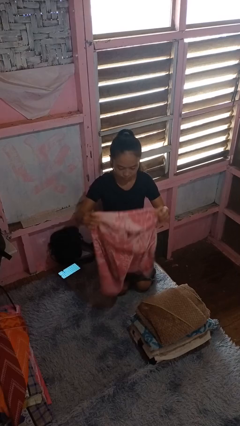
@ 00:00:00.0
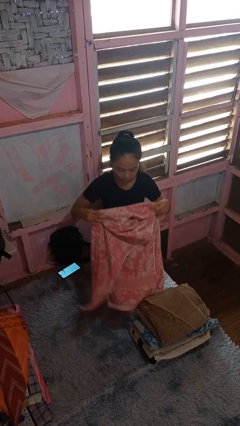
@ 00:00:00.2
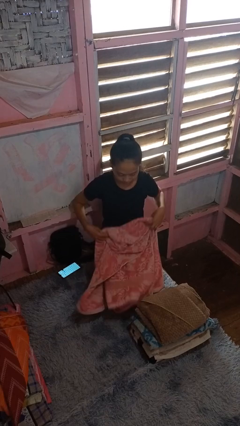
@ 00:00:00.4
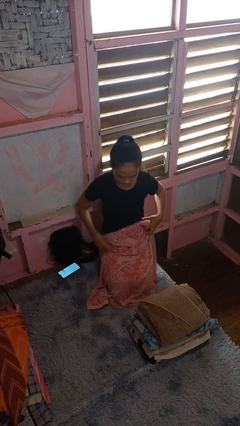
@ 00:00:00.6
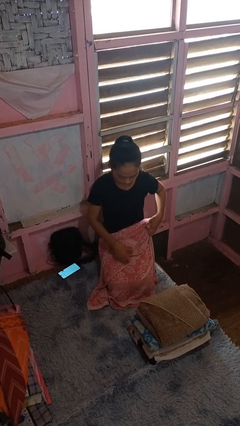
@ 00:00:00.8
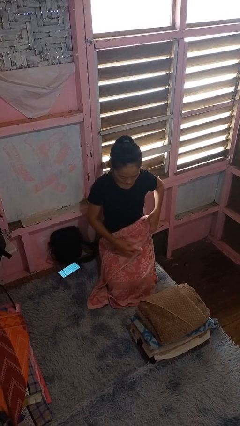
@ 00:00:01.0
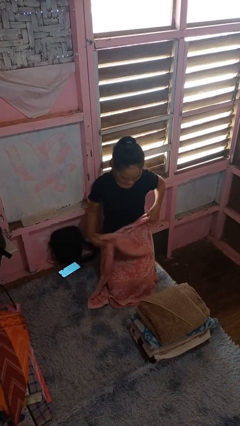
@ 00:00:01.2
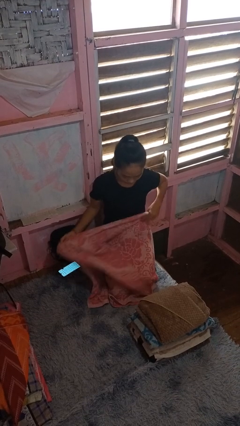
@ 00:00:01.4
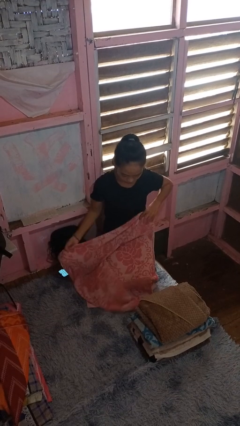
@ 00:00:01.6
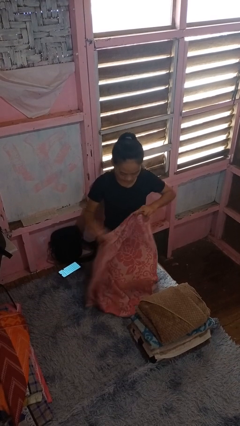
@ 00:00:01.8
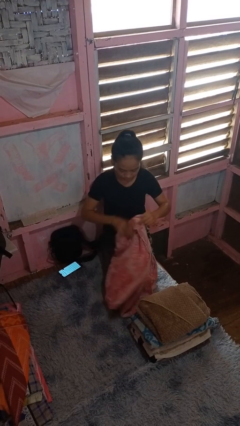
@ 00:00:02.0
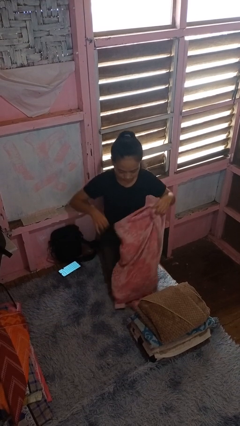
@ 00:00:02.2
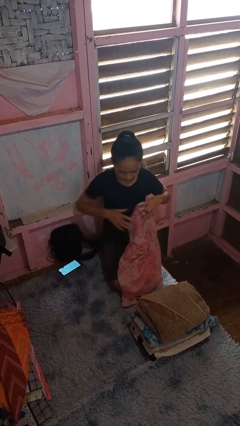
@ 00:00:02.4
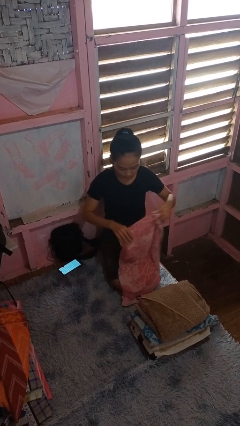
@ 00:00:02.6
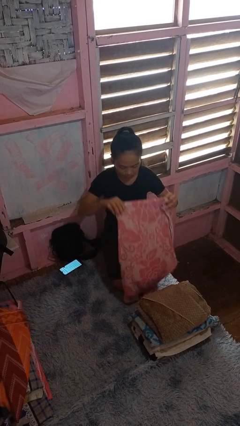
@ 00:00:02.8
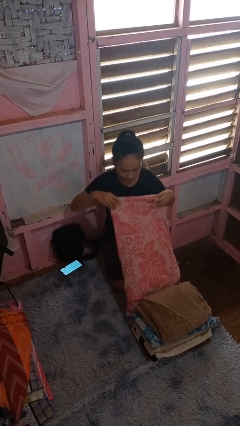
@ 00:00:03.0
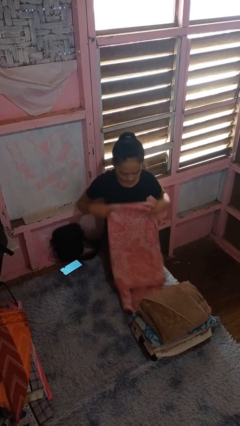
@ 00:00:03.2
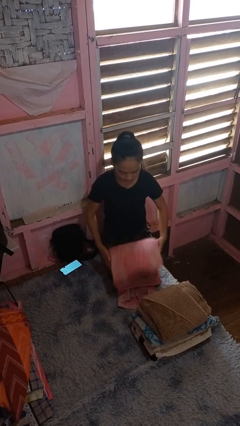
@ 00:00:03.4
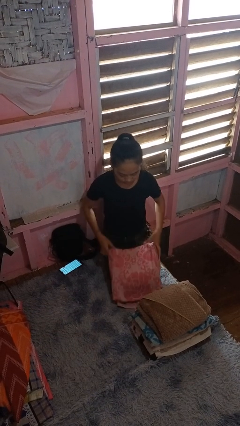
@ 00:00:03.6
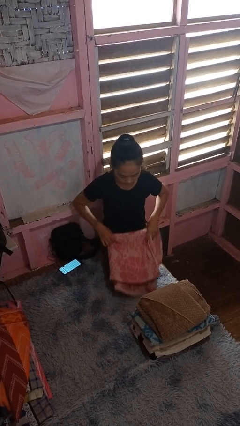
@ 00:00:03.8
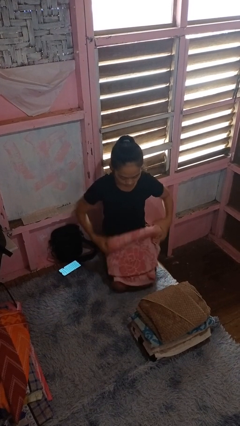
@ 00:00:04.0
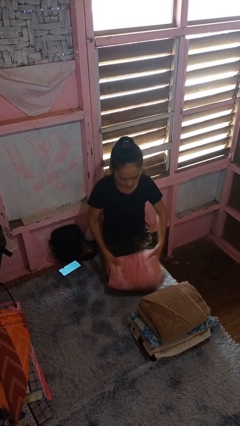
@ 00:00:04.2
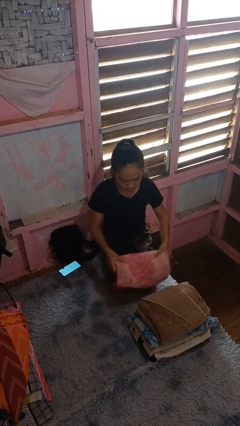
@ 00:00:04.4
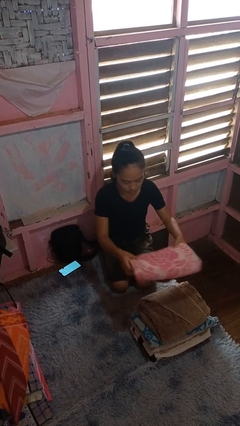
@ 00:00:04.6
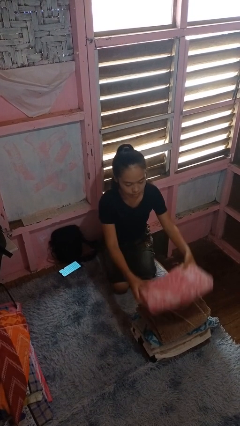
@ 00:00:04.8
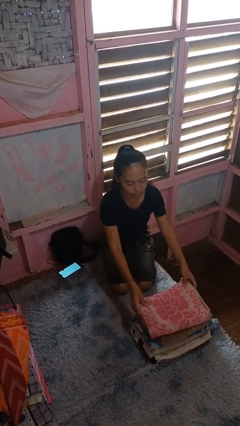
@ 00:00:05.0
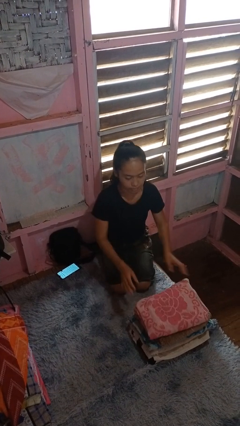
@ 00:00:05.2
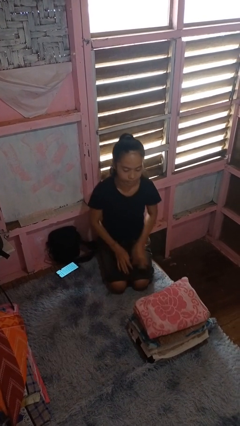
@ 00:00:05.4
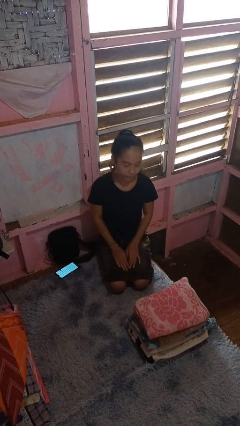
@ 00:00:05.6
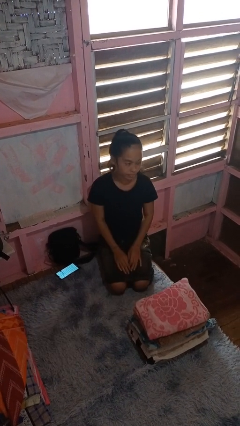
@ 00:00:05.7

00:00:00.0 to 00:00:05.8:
person folds towel

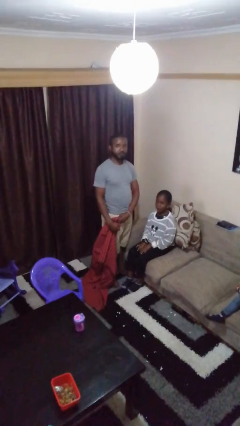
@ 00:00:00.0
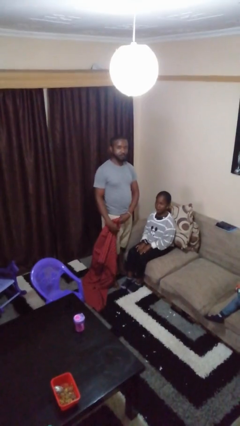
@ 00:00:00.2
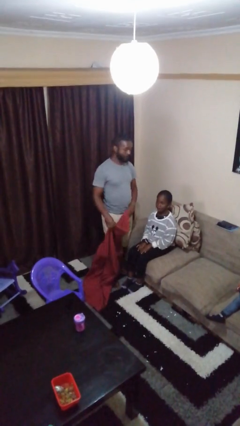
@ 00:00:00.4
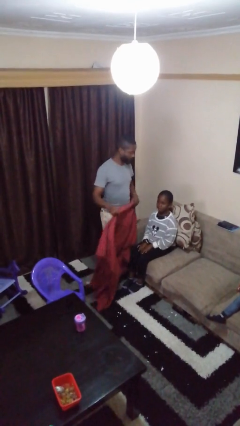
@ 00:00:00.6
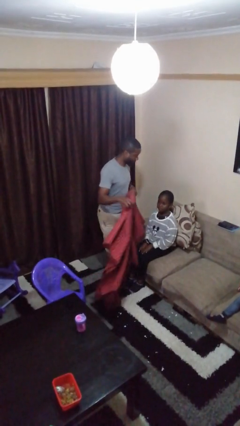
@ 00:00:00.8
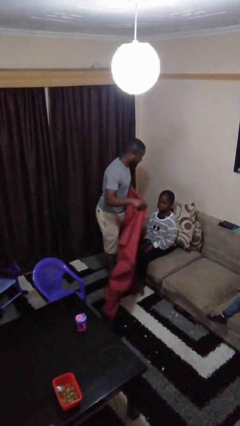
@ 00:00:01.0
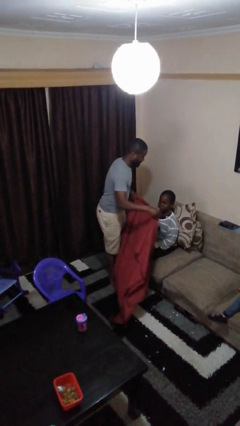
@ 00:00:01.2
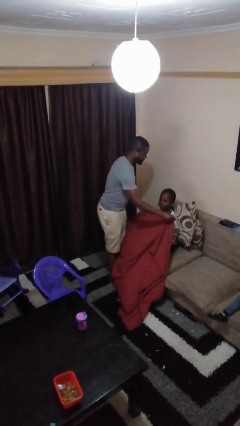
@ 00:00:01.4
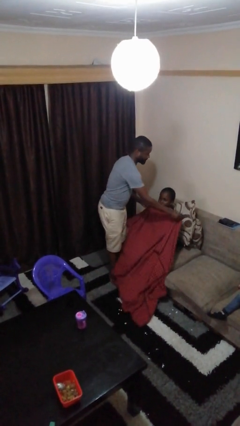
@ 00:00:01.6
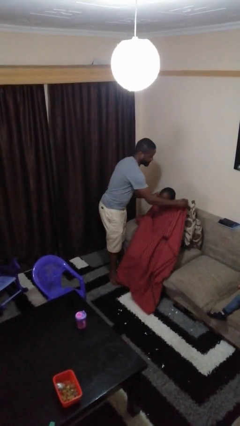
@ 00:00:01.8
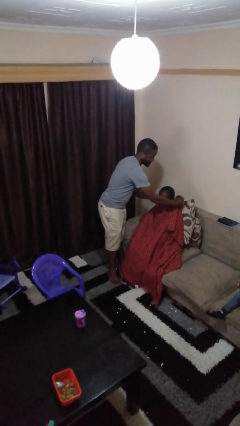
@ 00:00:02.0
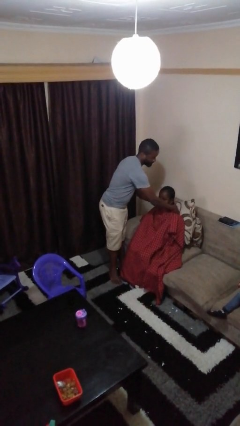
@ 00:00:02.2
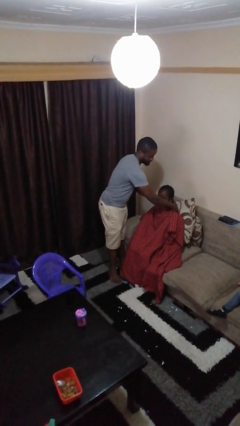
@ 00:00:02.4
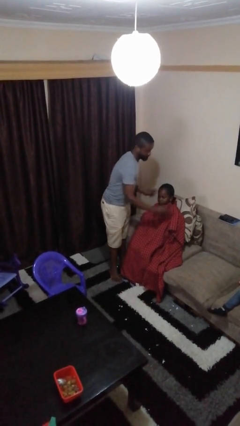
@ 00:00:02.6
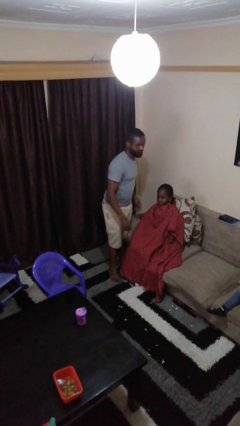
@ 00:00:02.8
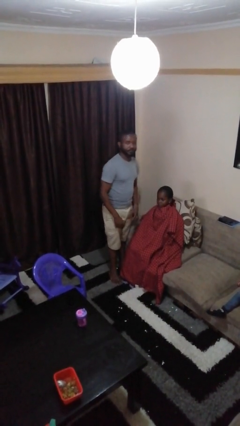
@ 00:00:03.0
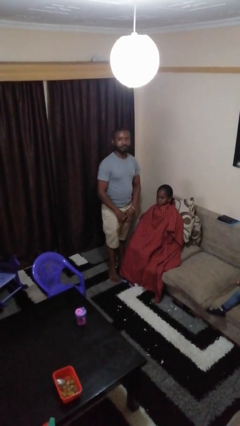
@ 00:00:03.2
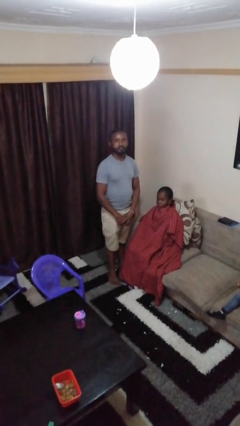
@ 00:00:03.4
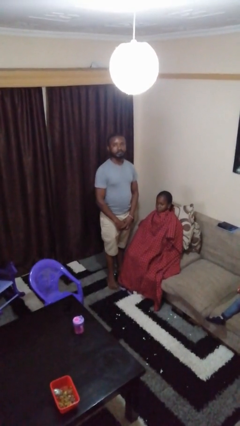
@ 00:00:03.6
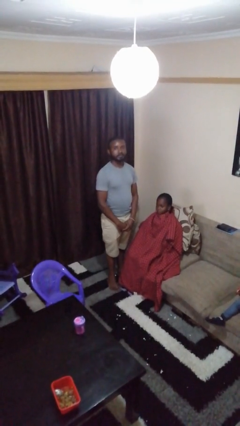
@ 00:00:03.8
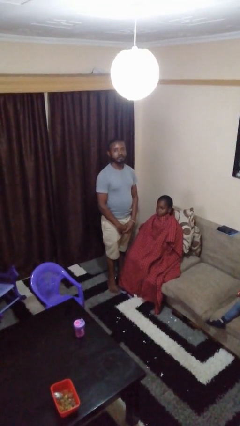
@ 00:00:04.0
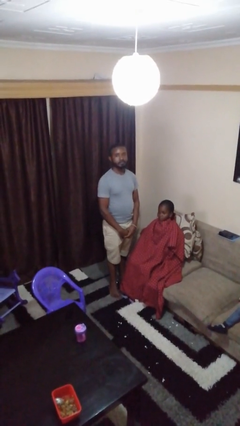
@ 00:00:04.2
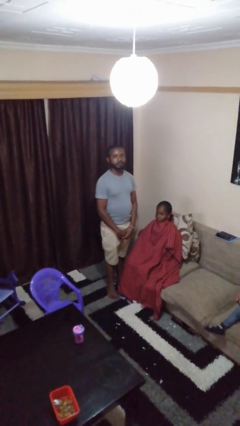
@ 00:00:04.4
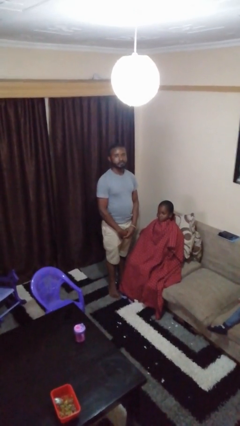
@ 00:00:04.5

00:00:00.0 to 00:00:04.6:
person covers friend with blanket

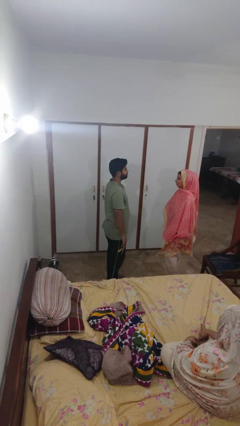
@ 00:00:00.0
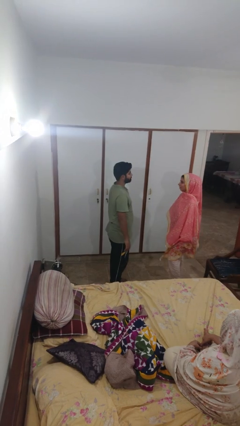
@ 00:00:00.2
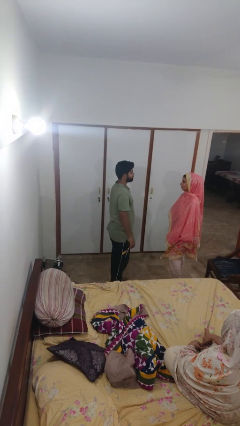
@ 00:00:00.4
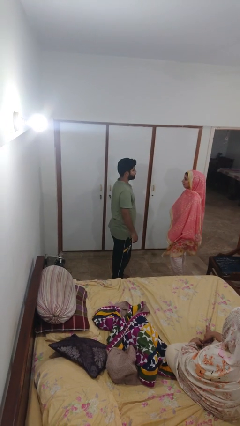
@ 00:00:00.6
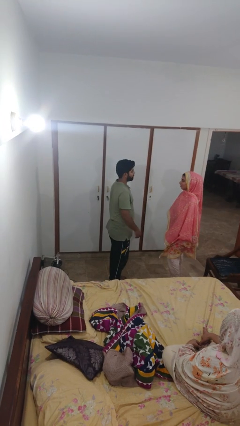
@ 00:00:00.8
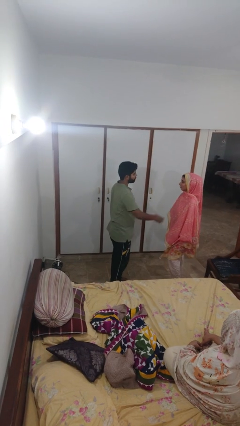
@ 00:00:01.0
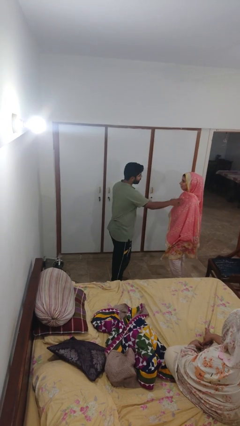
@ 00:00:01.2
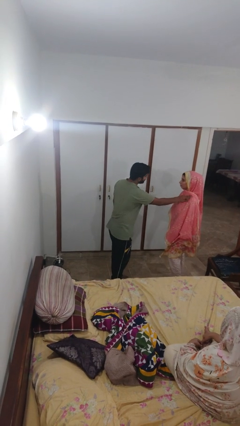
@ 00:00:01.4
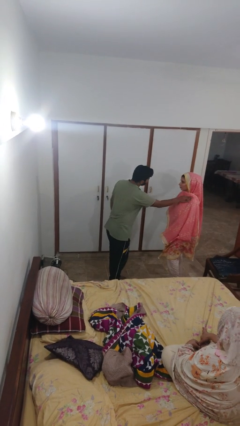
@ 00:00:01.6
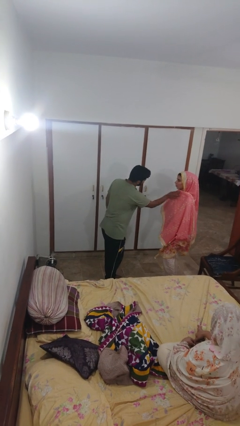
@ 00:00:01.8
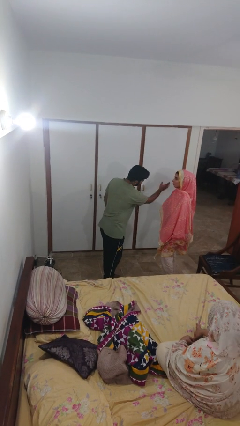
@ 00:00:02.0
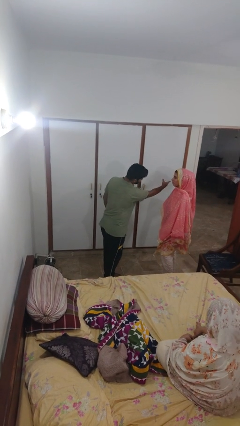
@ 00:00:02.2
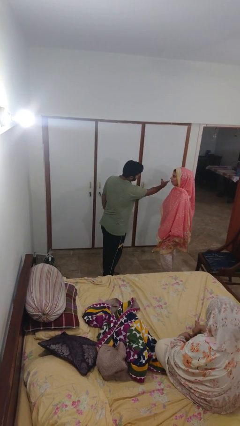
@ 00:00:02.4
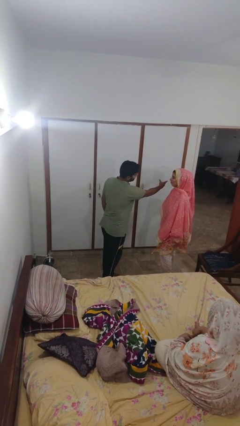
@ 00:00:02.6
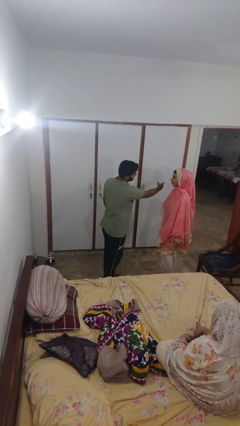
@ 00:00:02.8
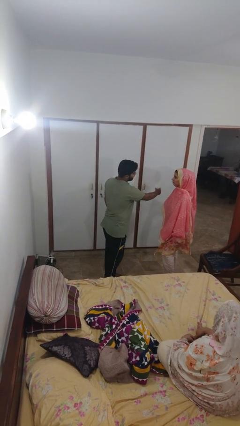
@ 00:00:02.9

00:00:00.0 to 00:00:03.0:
person shoves person

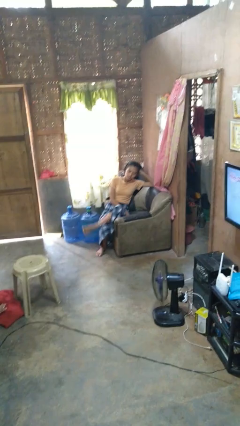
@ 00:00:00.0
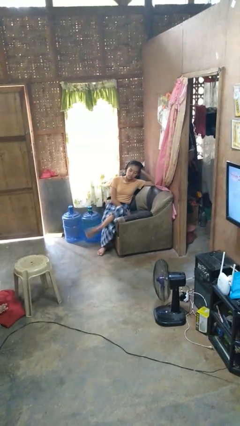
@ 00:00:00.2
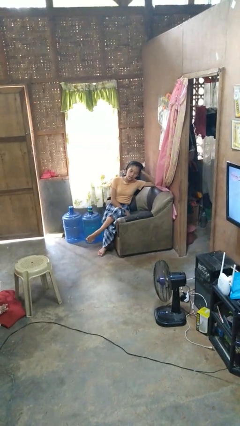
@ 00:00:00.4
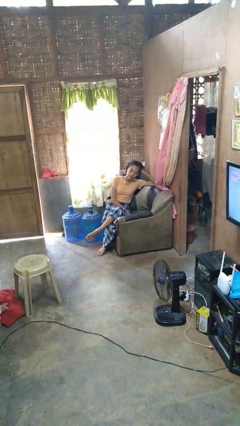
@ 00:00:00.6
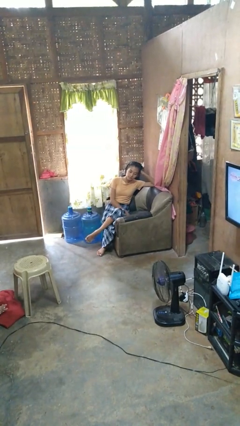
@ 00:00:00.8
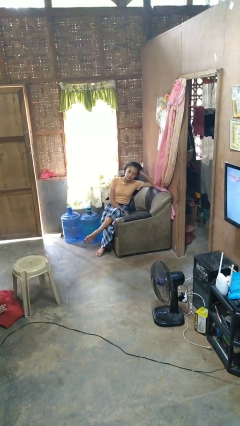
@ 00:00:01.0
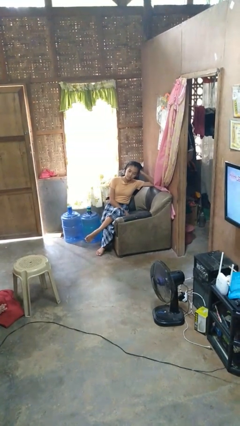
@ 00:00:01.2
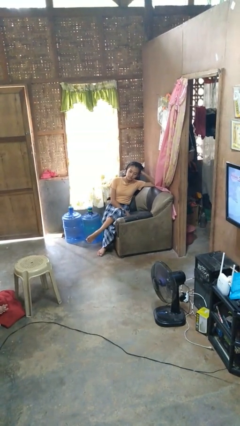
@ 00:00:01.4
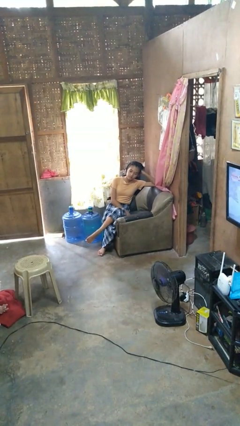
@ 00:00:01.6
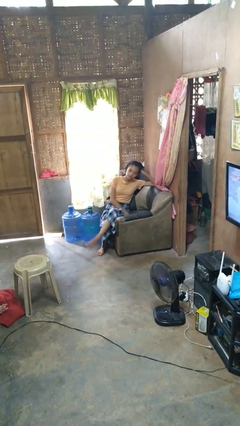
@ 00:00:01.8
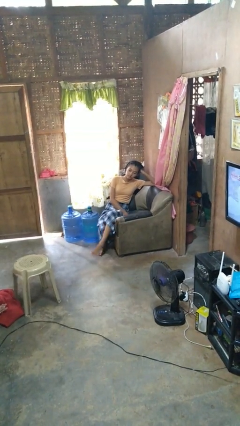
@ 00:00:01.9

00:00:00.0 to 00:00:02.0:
person crosses legs

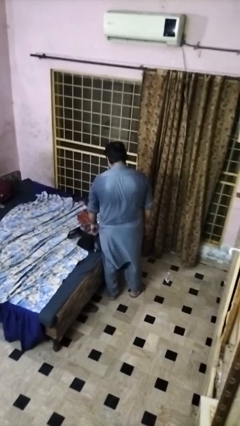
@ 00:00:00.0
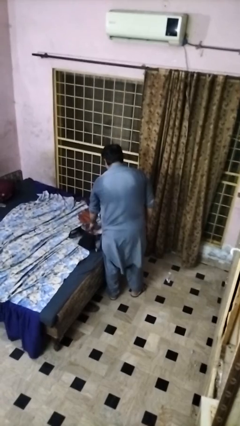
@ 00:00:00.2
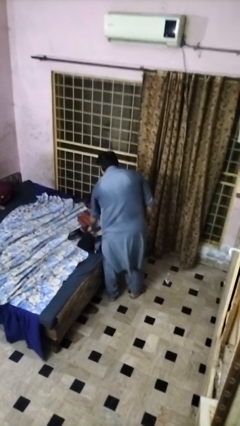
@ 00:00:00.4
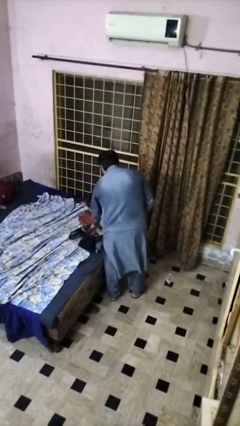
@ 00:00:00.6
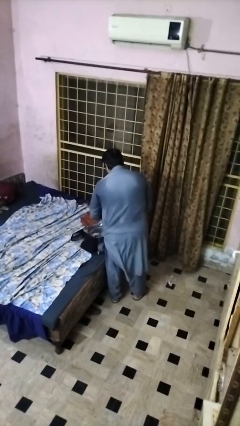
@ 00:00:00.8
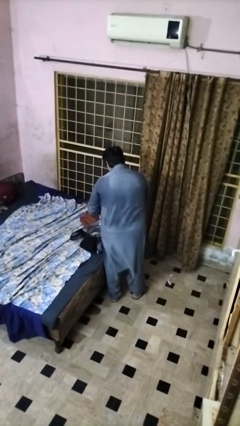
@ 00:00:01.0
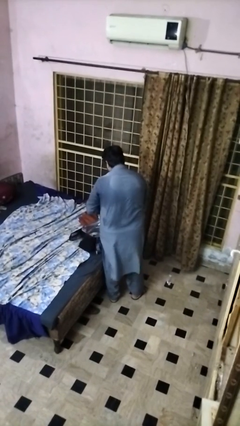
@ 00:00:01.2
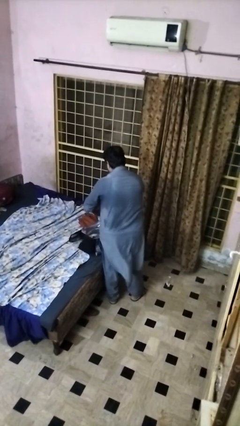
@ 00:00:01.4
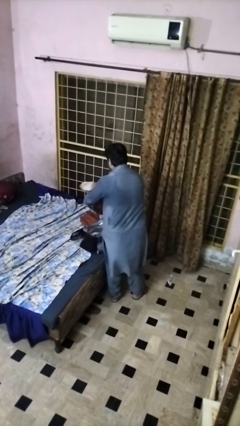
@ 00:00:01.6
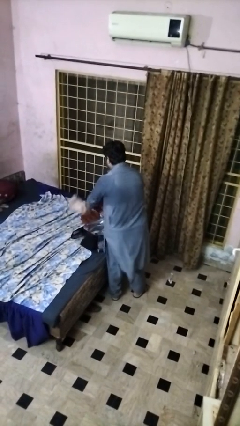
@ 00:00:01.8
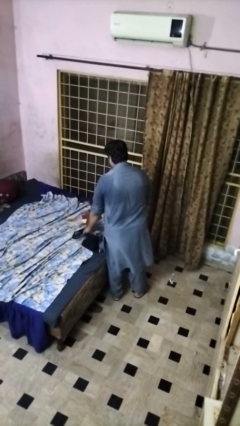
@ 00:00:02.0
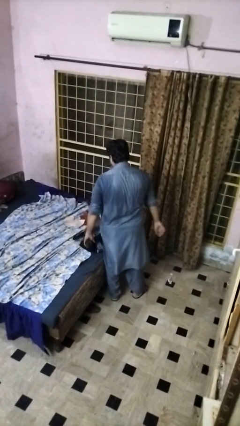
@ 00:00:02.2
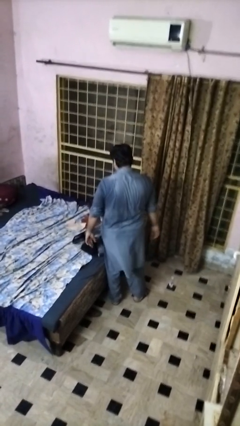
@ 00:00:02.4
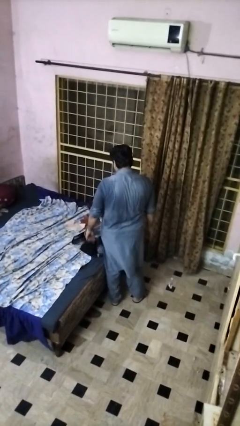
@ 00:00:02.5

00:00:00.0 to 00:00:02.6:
person unloads clothes from suitcase
